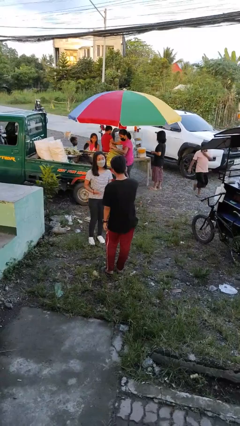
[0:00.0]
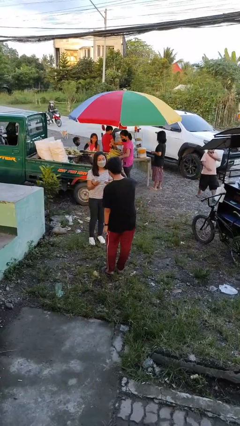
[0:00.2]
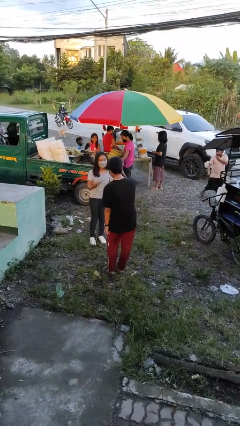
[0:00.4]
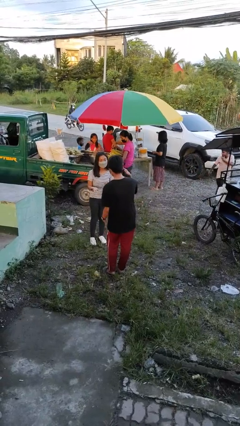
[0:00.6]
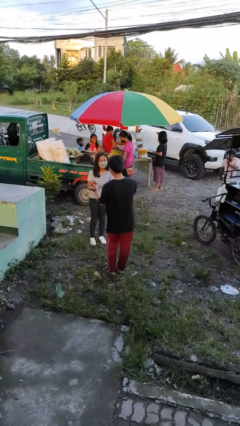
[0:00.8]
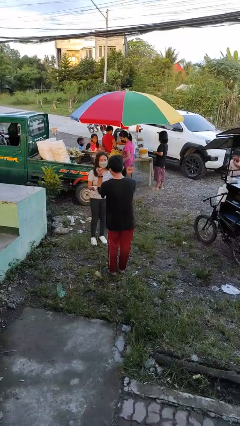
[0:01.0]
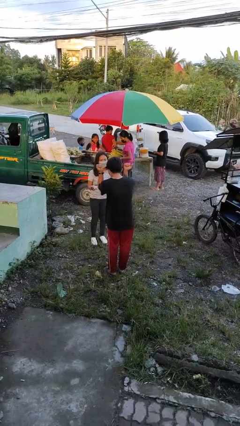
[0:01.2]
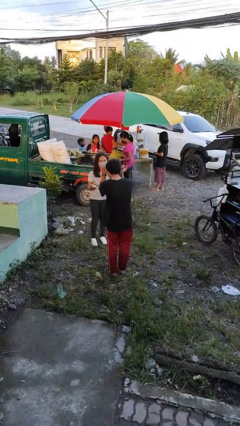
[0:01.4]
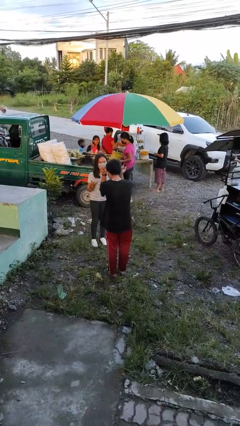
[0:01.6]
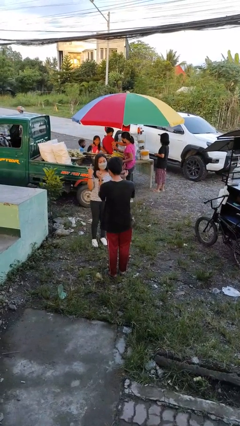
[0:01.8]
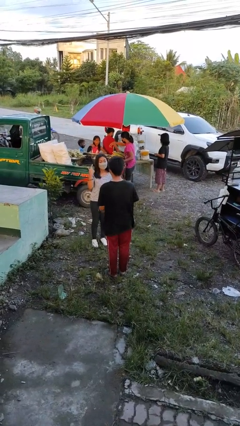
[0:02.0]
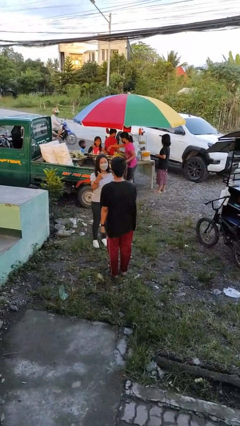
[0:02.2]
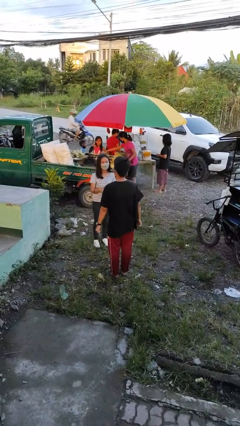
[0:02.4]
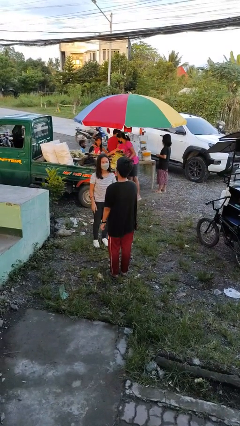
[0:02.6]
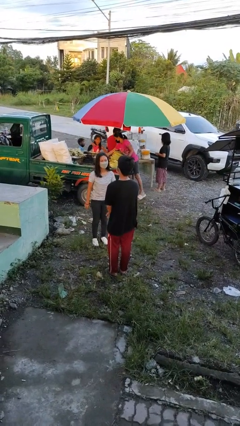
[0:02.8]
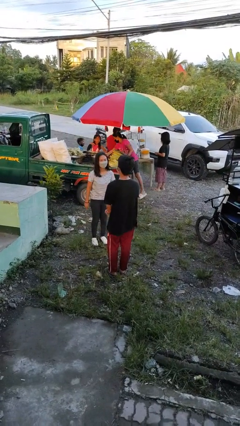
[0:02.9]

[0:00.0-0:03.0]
person talks to person

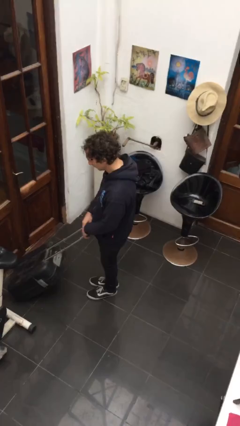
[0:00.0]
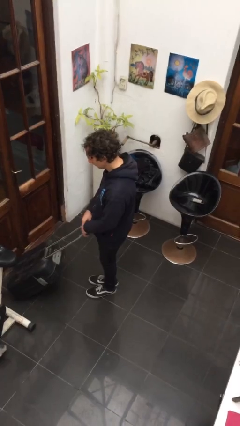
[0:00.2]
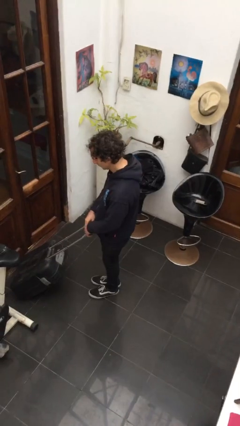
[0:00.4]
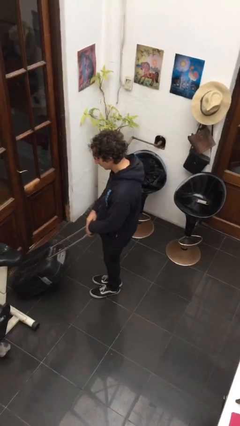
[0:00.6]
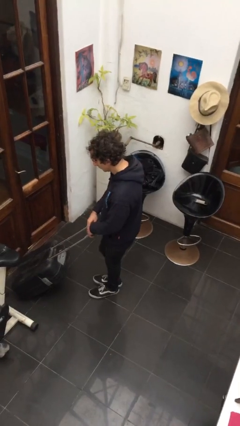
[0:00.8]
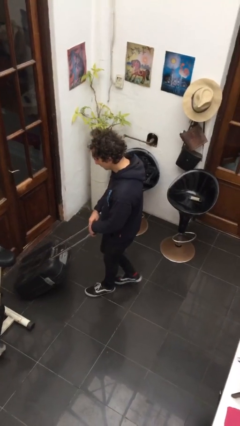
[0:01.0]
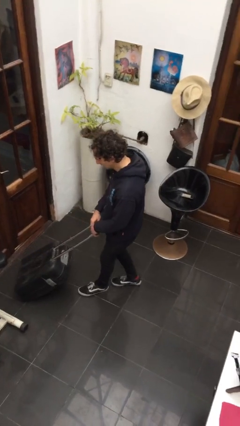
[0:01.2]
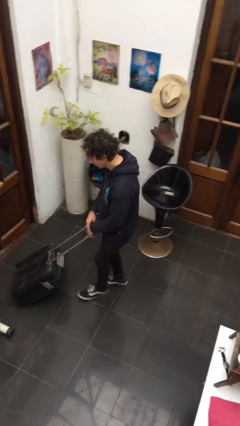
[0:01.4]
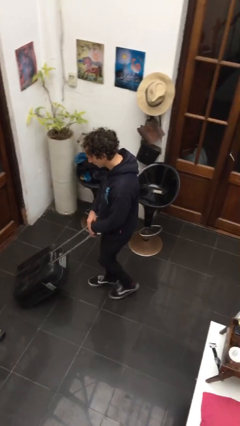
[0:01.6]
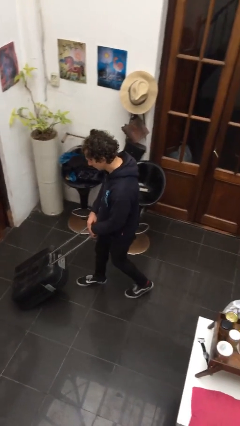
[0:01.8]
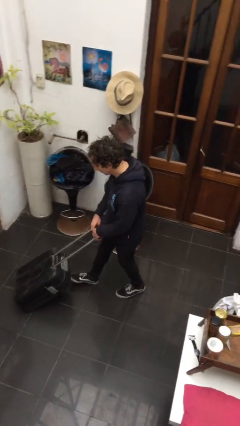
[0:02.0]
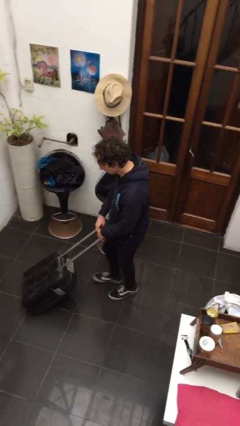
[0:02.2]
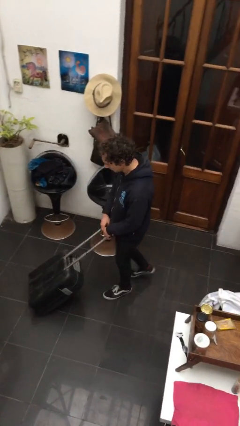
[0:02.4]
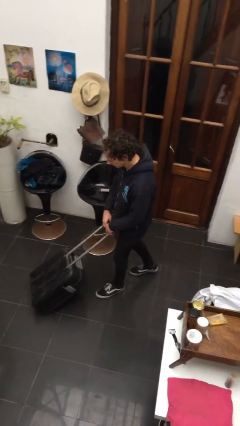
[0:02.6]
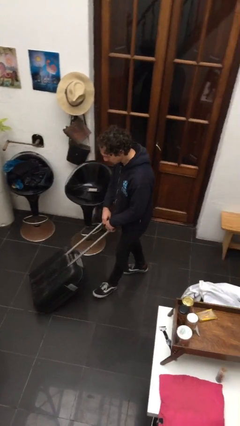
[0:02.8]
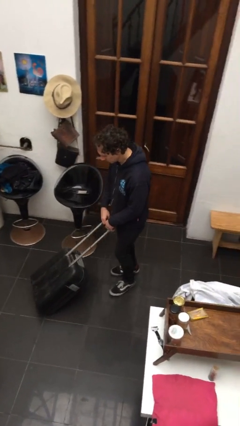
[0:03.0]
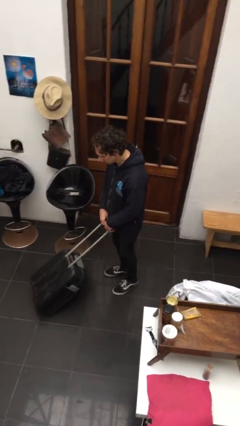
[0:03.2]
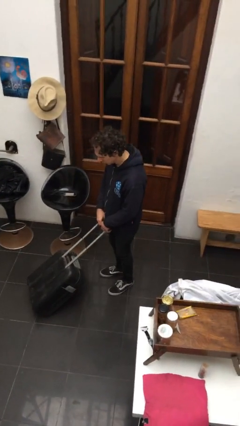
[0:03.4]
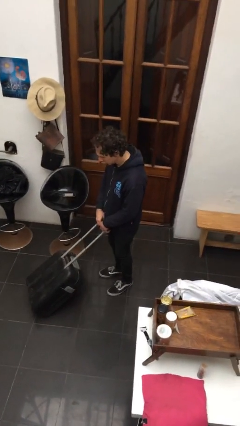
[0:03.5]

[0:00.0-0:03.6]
person pulls wheeled cart

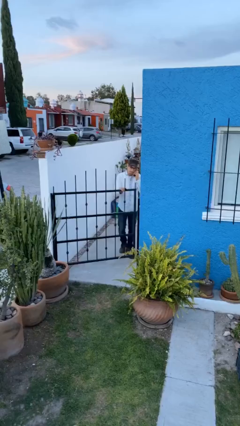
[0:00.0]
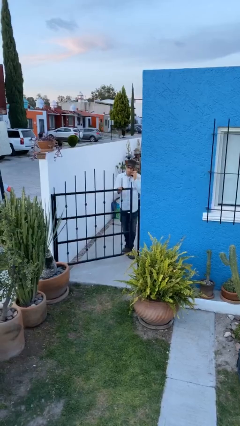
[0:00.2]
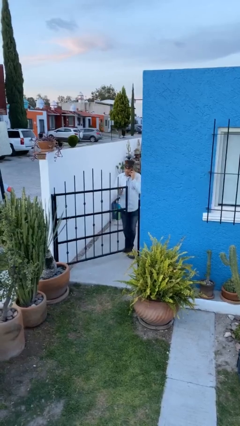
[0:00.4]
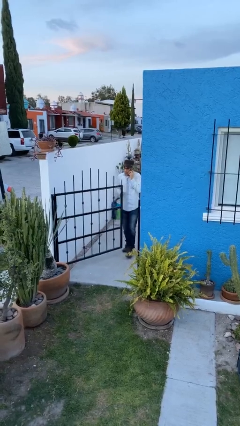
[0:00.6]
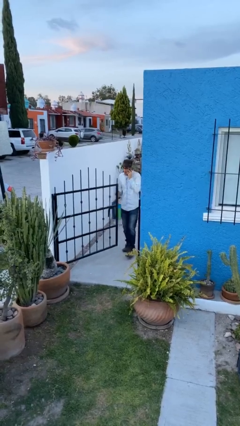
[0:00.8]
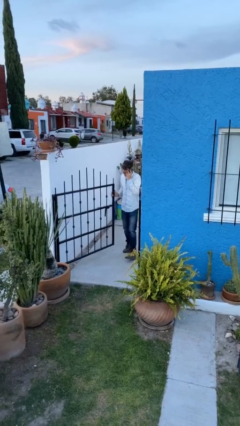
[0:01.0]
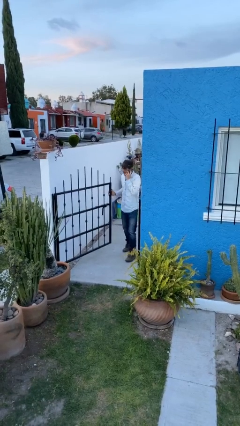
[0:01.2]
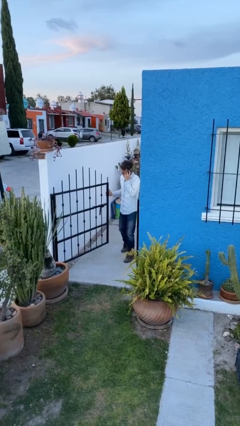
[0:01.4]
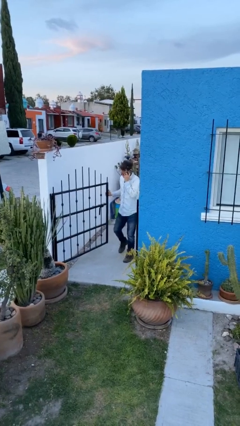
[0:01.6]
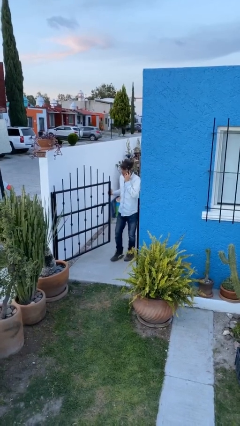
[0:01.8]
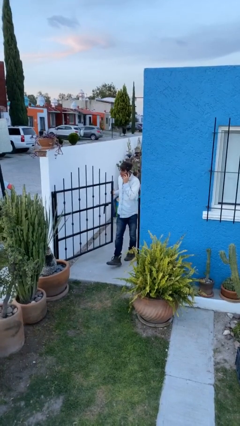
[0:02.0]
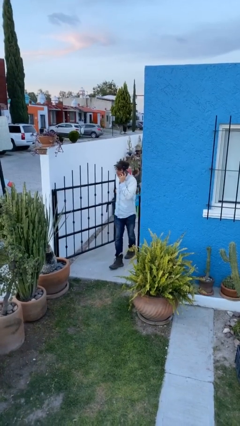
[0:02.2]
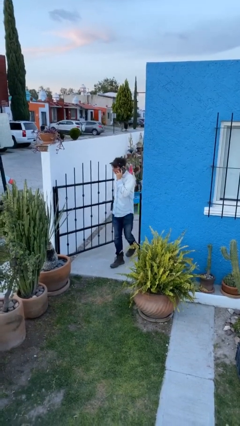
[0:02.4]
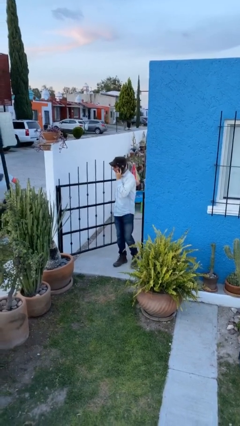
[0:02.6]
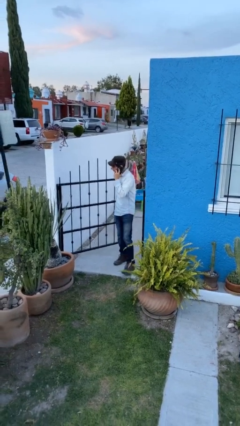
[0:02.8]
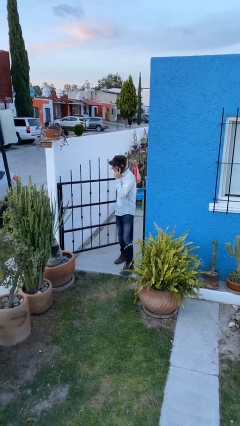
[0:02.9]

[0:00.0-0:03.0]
person enters scene through structure

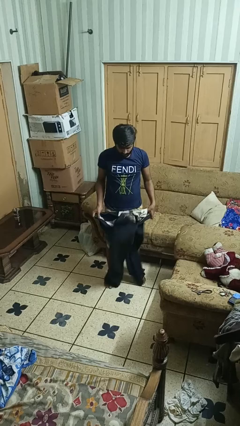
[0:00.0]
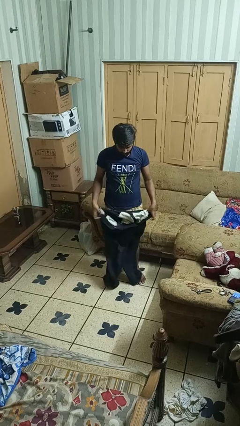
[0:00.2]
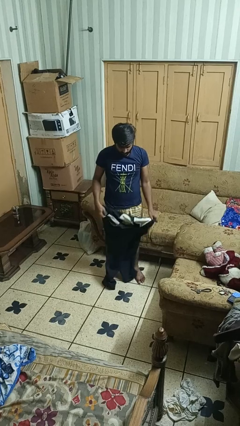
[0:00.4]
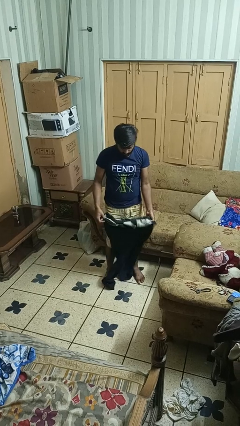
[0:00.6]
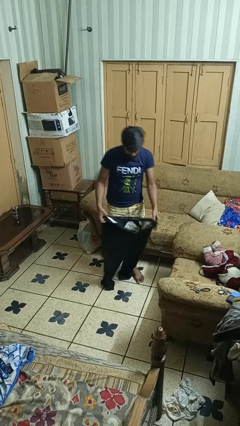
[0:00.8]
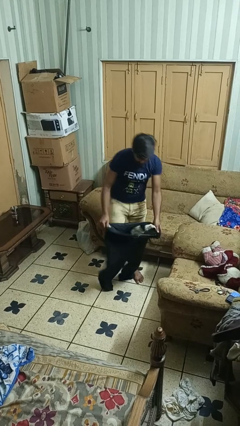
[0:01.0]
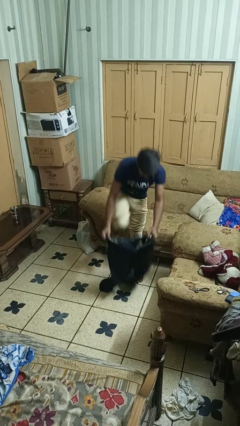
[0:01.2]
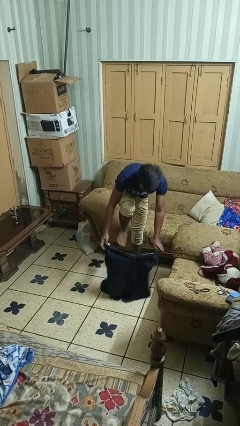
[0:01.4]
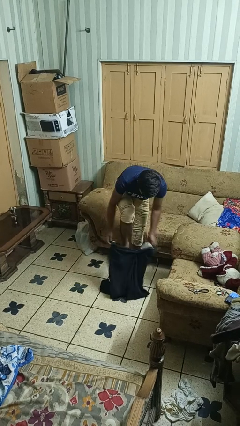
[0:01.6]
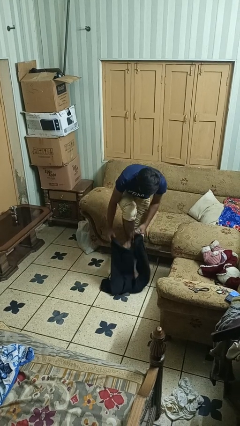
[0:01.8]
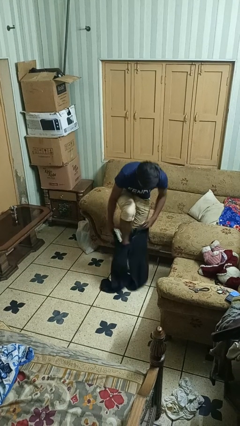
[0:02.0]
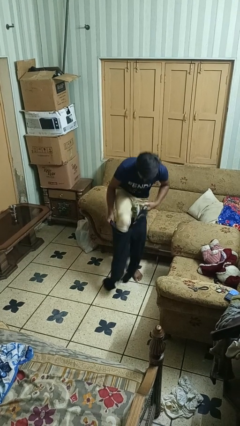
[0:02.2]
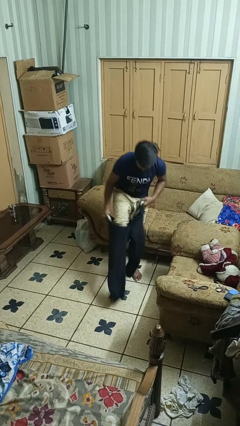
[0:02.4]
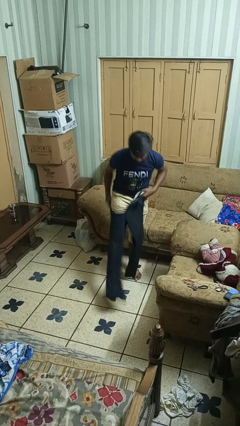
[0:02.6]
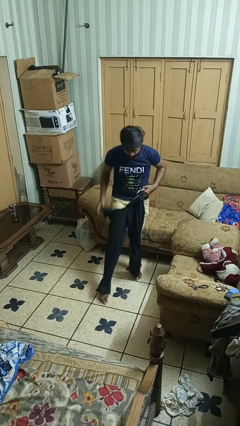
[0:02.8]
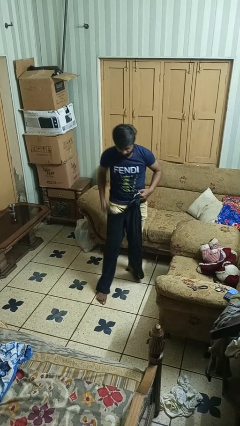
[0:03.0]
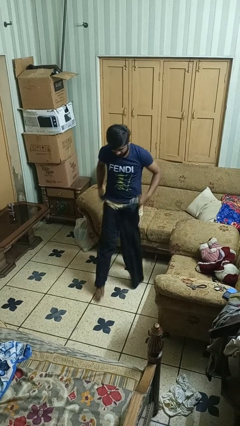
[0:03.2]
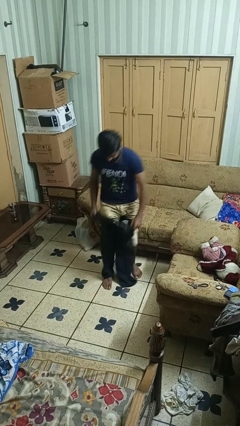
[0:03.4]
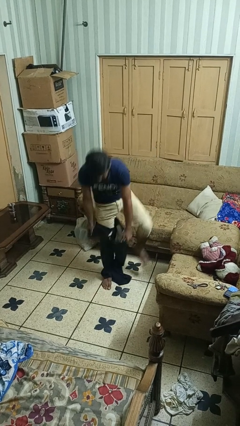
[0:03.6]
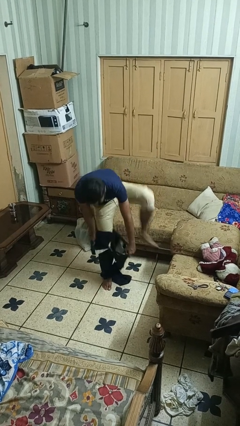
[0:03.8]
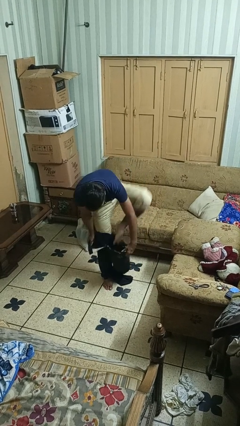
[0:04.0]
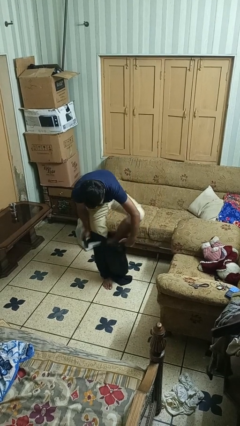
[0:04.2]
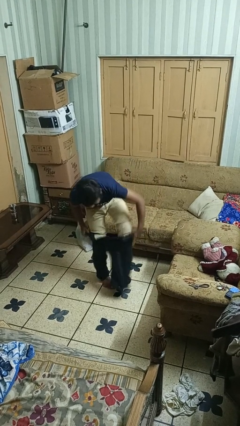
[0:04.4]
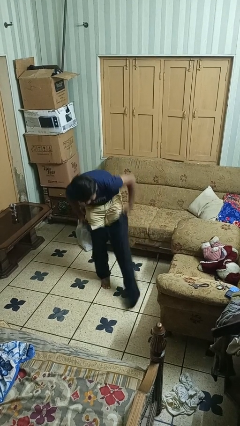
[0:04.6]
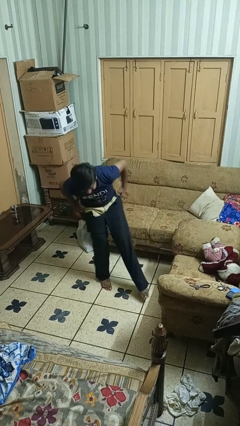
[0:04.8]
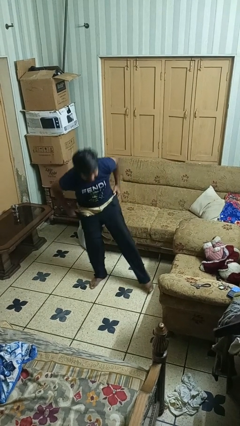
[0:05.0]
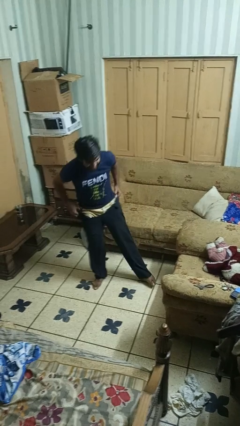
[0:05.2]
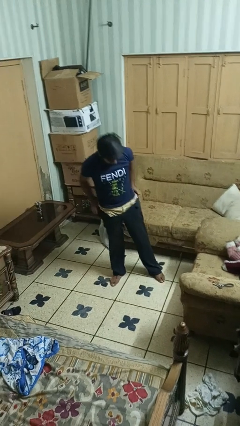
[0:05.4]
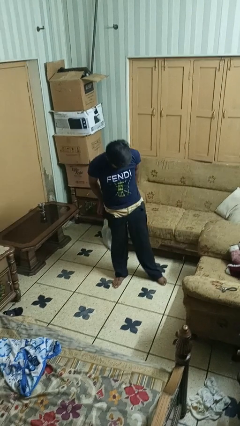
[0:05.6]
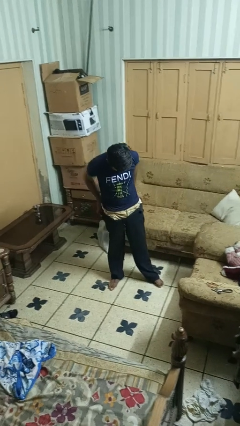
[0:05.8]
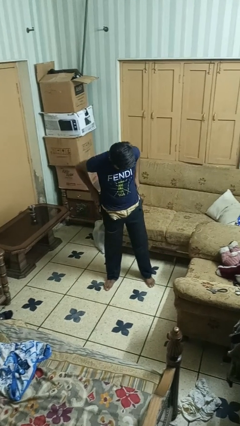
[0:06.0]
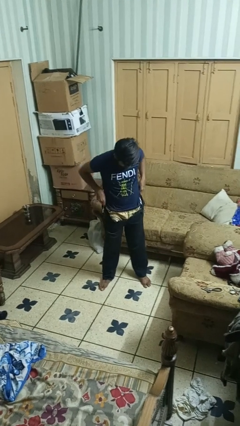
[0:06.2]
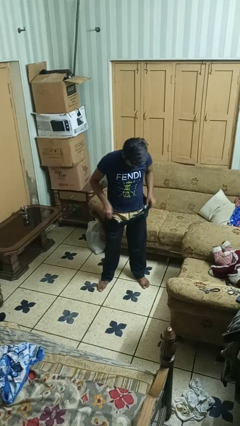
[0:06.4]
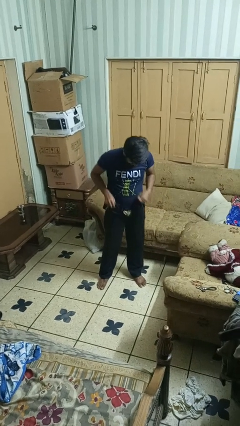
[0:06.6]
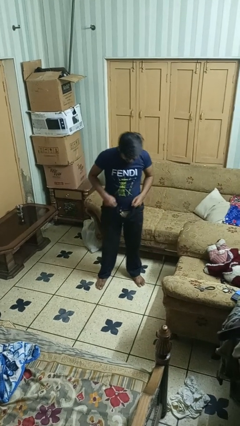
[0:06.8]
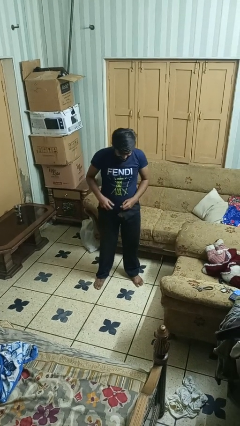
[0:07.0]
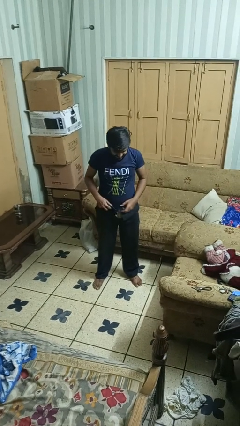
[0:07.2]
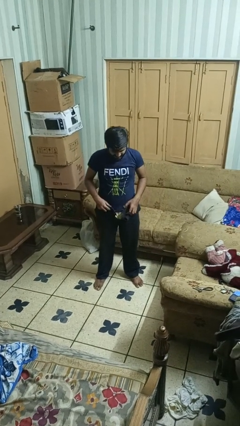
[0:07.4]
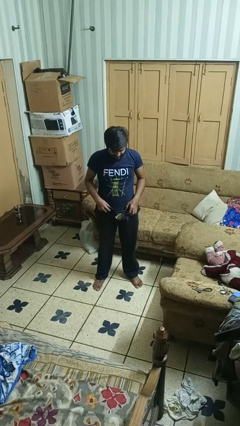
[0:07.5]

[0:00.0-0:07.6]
person puts on pants

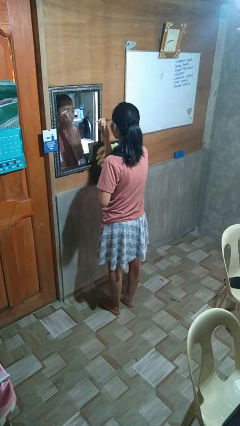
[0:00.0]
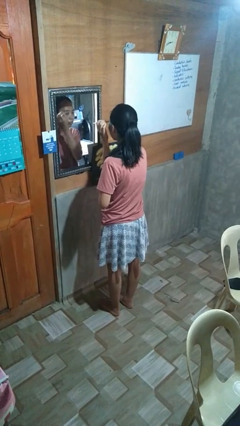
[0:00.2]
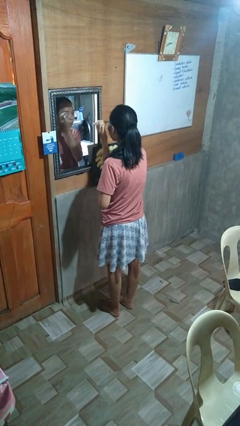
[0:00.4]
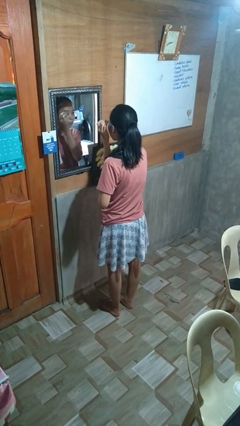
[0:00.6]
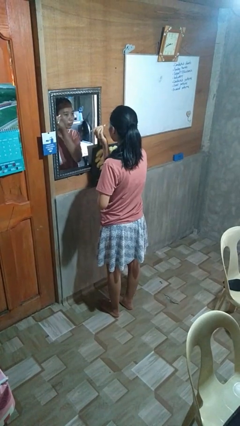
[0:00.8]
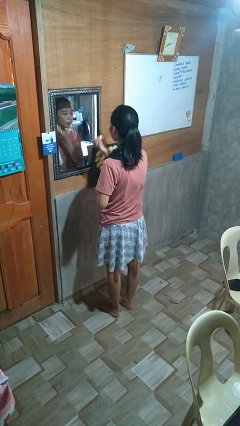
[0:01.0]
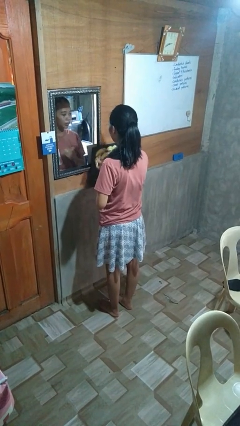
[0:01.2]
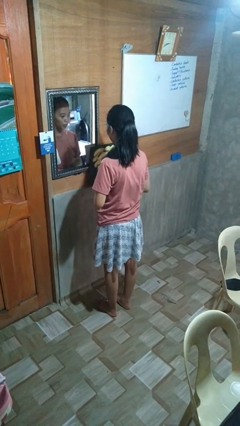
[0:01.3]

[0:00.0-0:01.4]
person applies eye makeup
